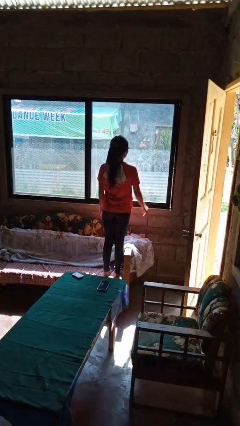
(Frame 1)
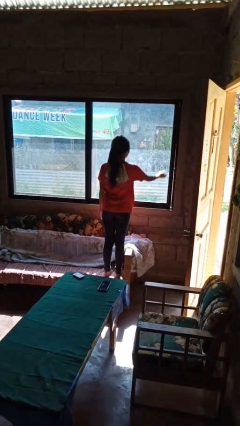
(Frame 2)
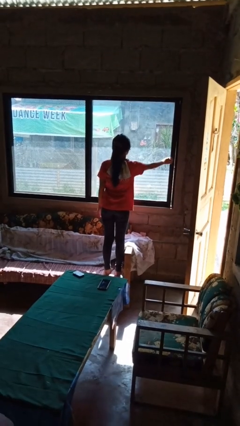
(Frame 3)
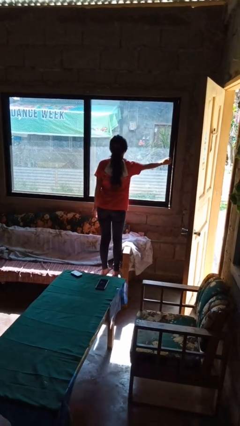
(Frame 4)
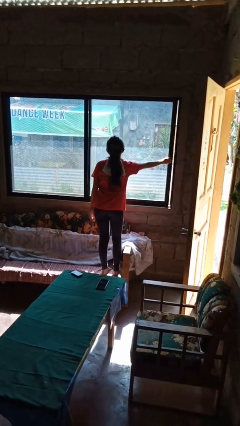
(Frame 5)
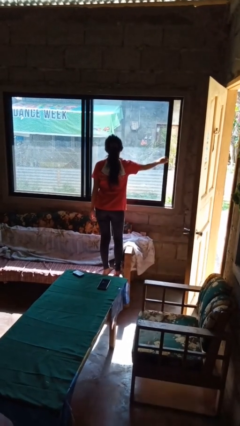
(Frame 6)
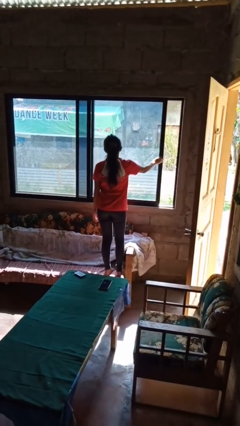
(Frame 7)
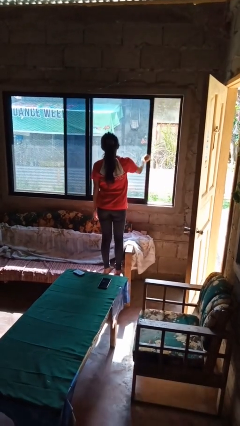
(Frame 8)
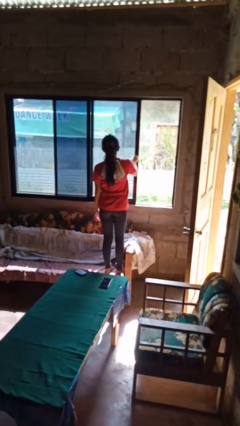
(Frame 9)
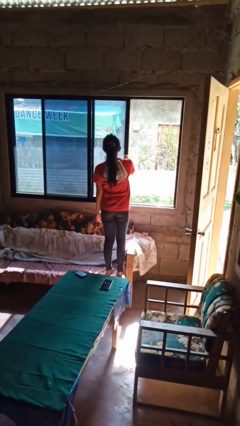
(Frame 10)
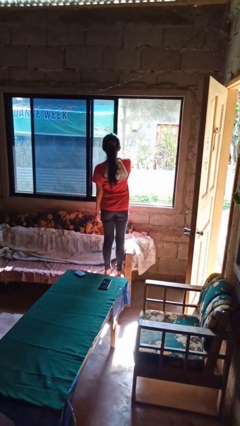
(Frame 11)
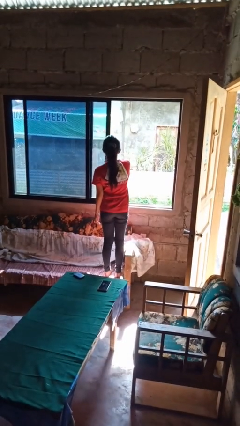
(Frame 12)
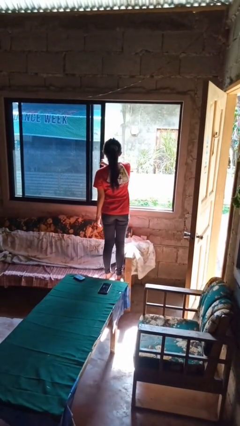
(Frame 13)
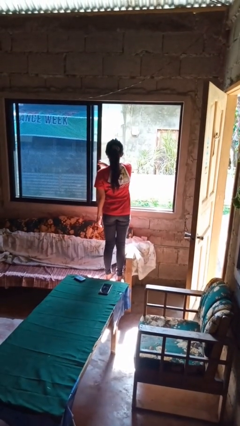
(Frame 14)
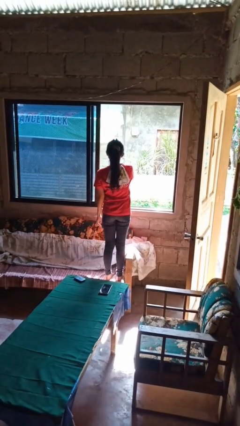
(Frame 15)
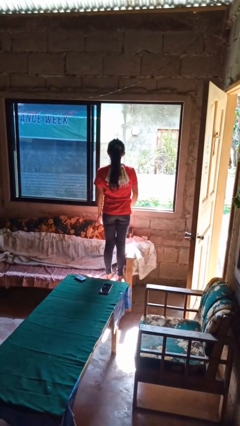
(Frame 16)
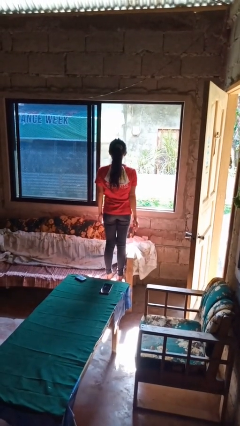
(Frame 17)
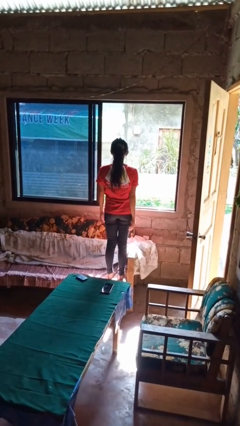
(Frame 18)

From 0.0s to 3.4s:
person opens home window

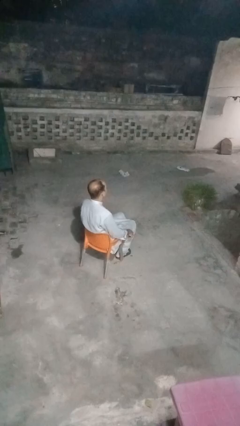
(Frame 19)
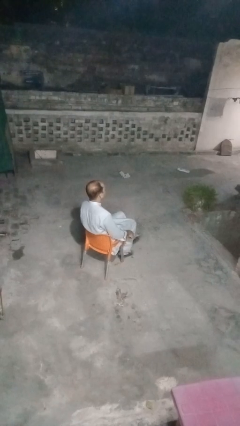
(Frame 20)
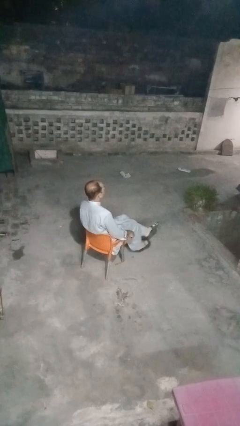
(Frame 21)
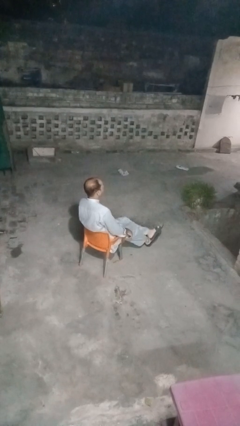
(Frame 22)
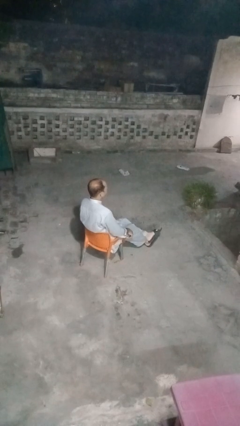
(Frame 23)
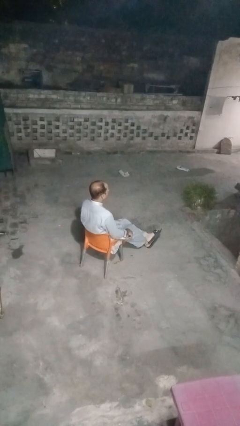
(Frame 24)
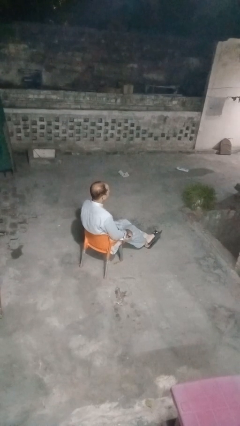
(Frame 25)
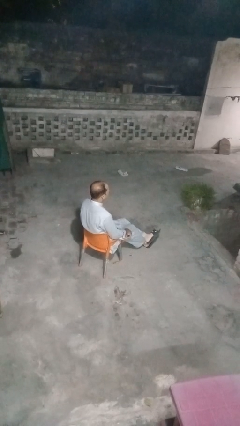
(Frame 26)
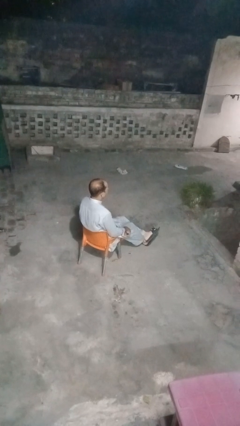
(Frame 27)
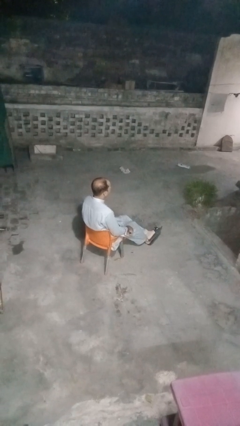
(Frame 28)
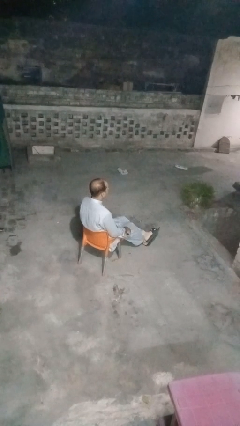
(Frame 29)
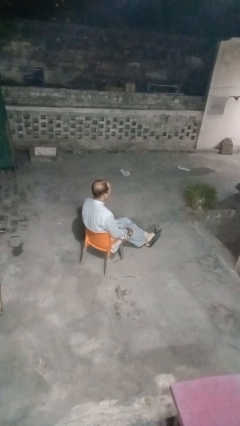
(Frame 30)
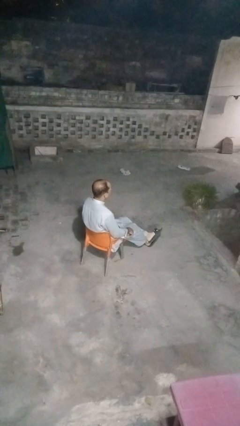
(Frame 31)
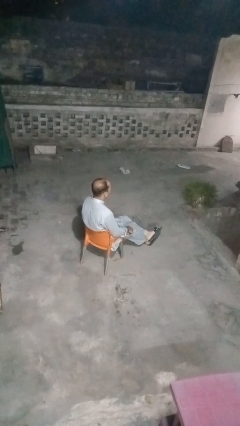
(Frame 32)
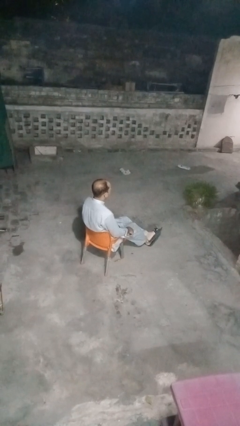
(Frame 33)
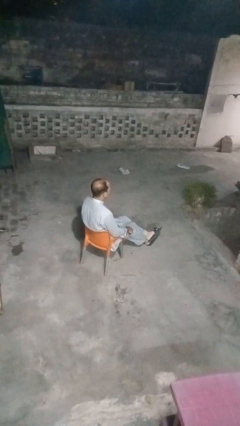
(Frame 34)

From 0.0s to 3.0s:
person crosses legs

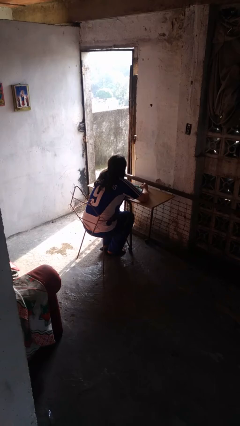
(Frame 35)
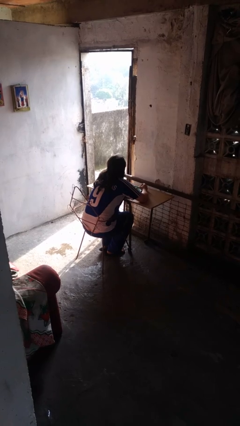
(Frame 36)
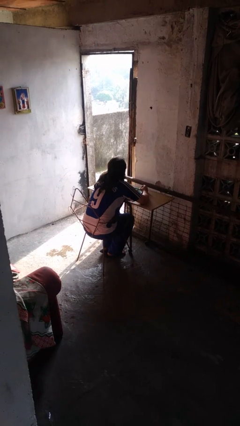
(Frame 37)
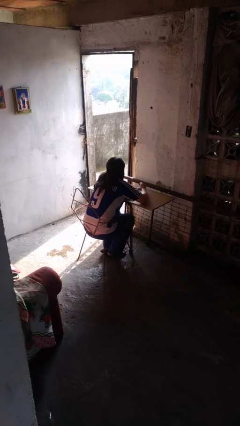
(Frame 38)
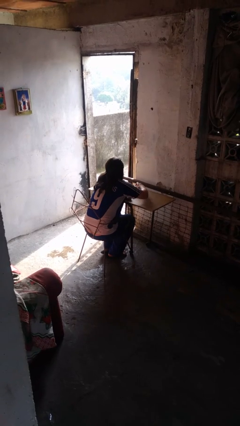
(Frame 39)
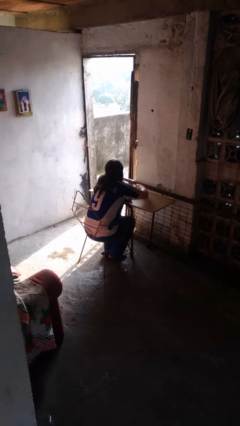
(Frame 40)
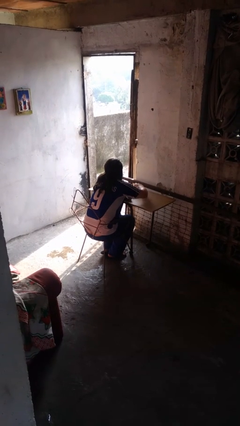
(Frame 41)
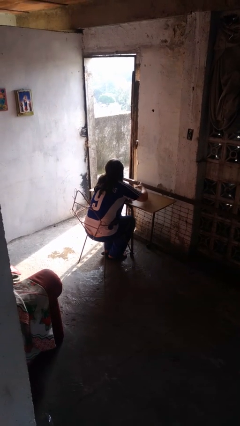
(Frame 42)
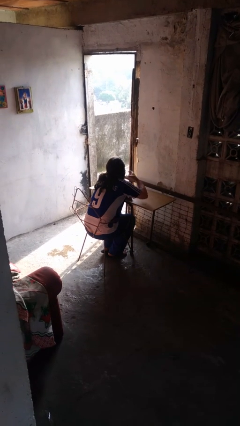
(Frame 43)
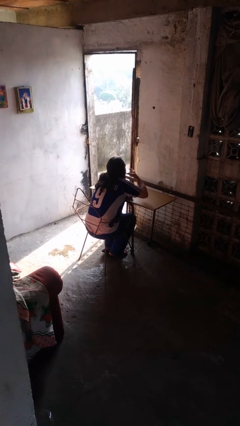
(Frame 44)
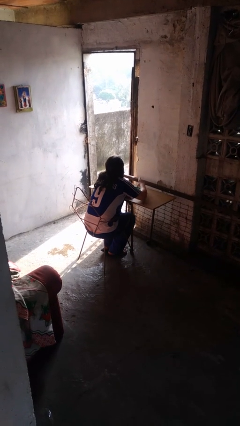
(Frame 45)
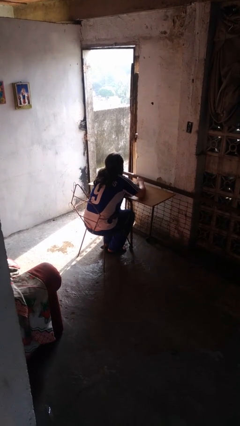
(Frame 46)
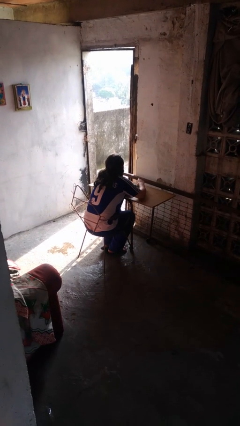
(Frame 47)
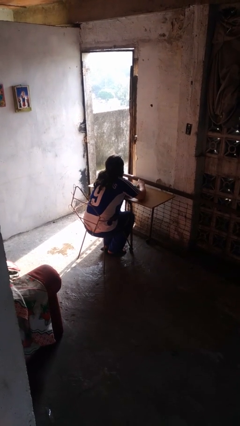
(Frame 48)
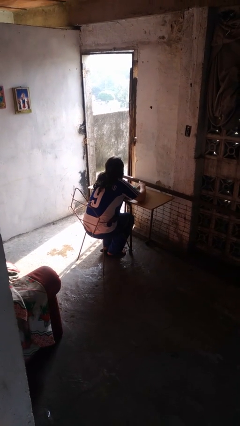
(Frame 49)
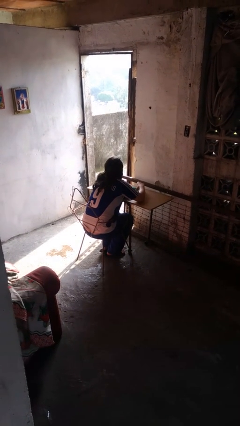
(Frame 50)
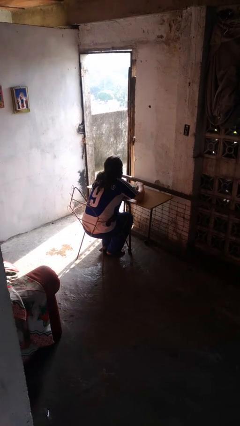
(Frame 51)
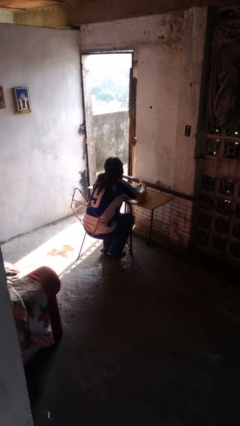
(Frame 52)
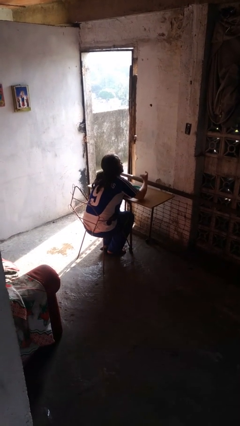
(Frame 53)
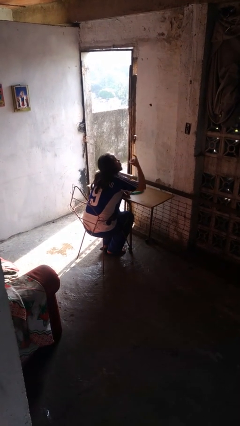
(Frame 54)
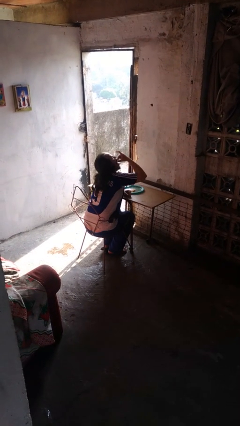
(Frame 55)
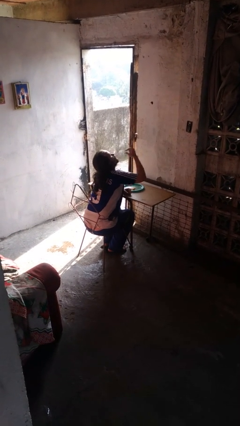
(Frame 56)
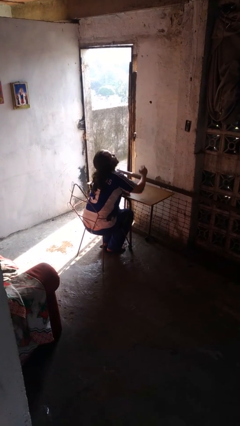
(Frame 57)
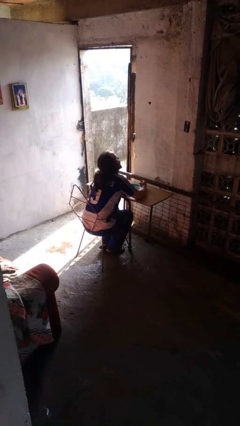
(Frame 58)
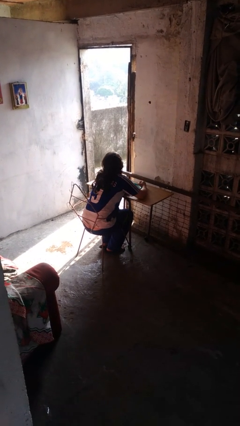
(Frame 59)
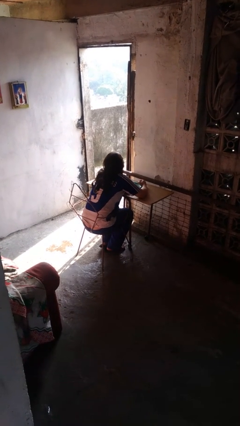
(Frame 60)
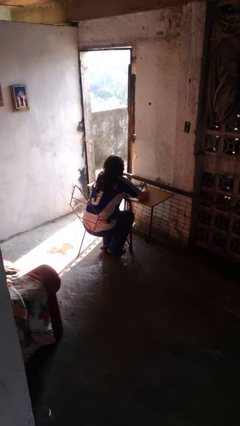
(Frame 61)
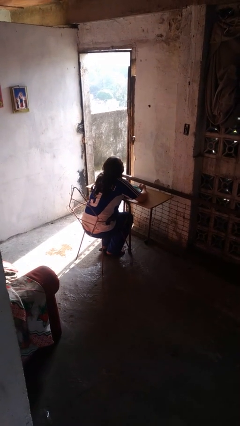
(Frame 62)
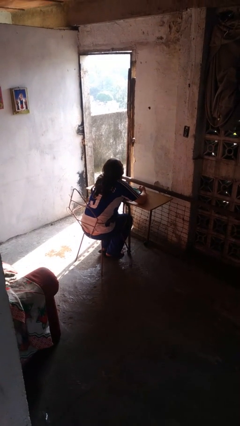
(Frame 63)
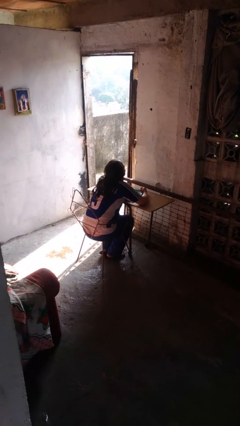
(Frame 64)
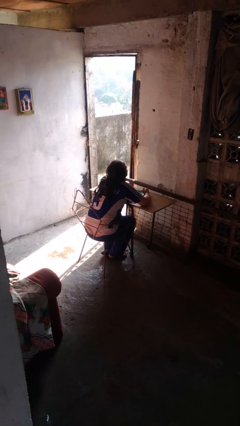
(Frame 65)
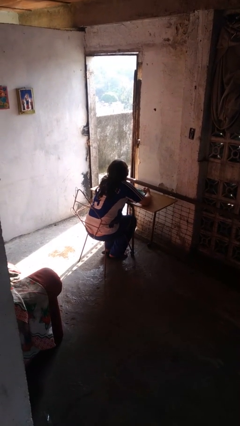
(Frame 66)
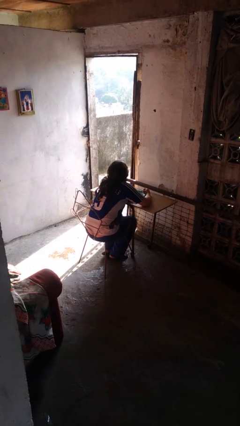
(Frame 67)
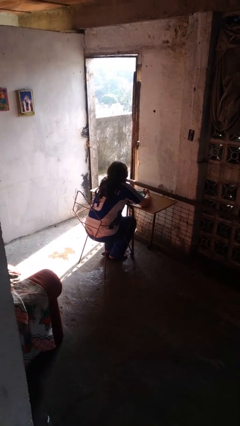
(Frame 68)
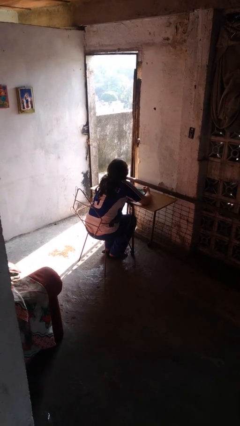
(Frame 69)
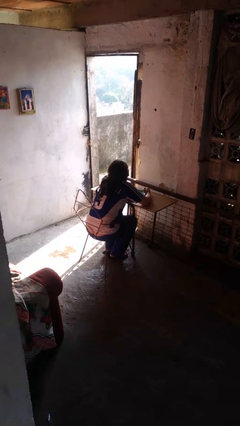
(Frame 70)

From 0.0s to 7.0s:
person eats with hands

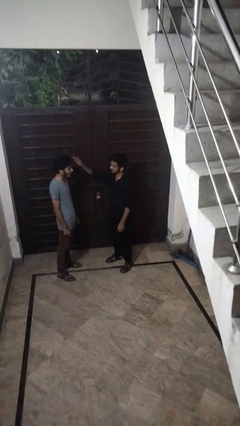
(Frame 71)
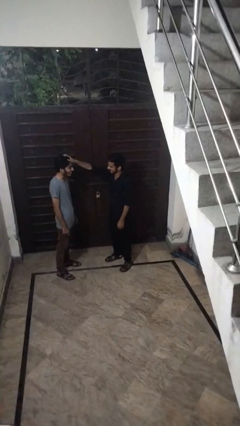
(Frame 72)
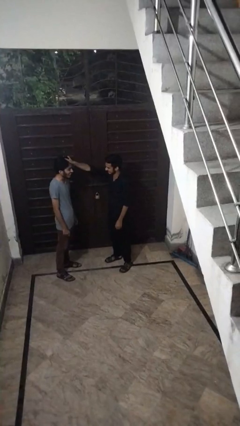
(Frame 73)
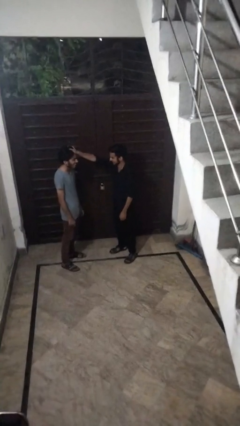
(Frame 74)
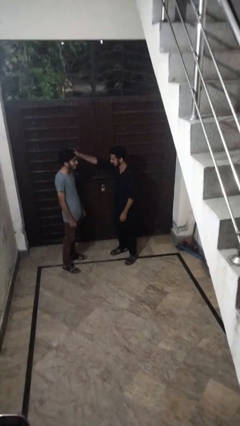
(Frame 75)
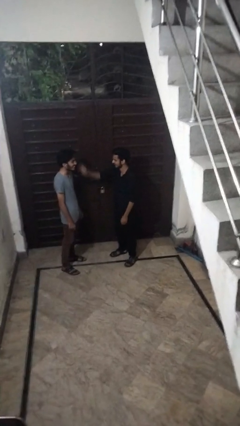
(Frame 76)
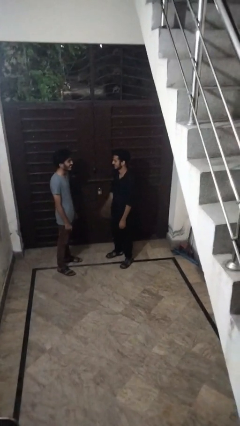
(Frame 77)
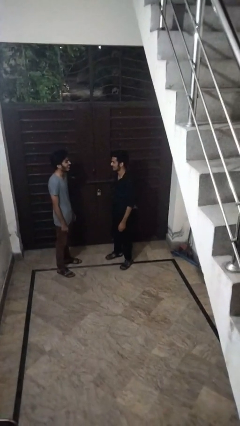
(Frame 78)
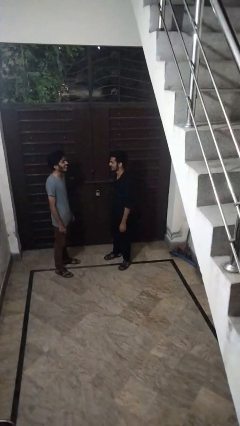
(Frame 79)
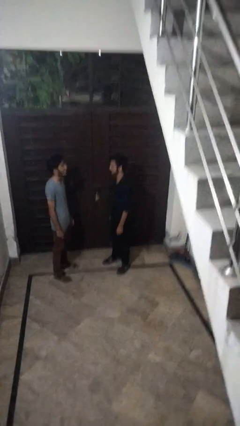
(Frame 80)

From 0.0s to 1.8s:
person grabs person by hair

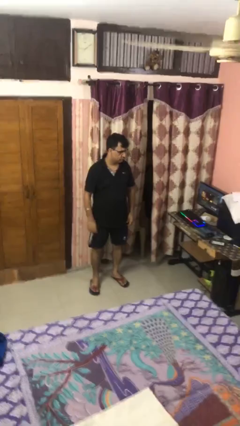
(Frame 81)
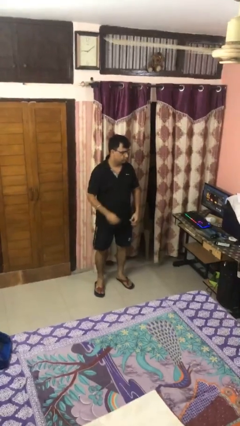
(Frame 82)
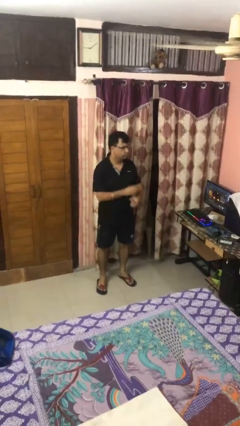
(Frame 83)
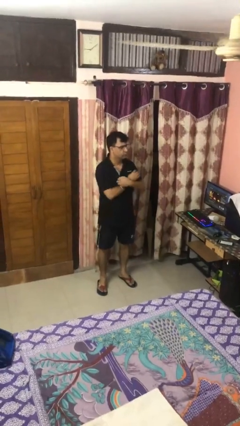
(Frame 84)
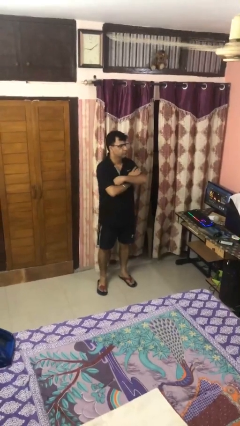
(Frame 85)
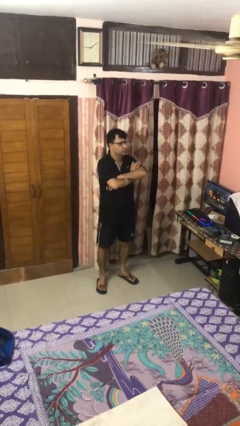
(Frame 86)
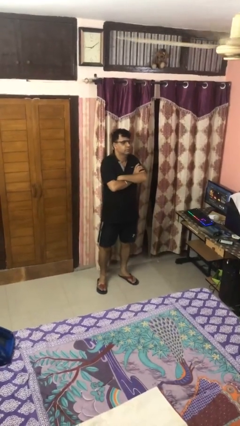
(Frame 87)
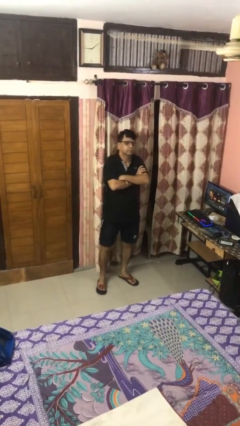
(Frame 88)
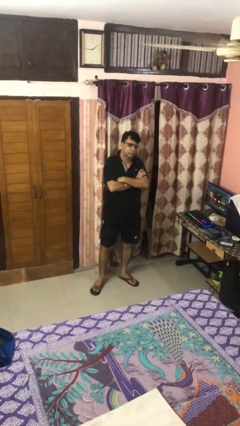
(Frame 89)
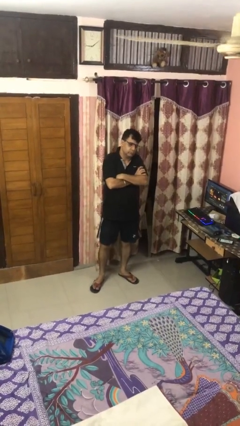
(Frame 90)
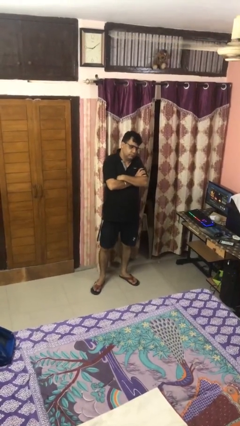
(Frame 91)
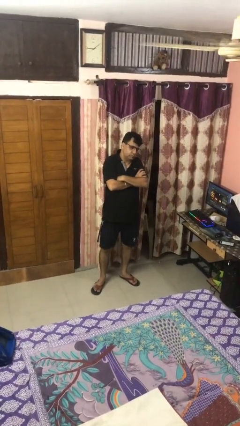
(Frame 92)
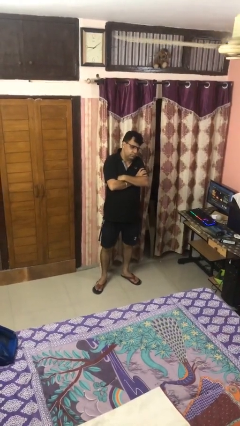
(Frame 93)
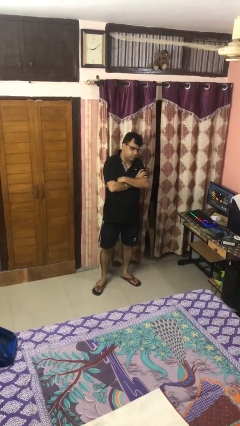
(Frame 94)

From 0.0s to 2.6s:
person crosses arms
